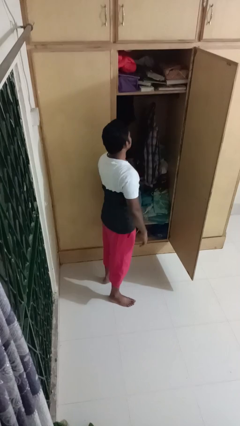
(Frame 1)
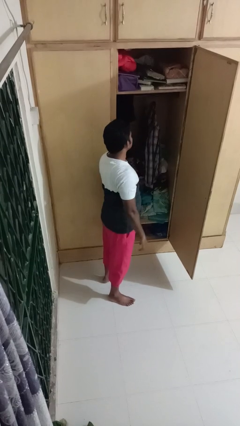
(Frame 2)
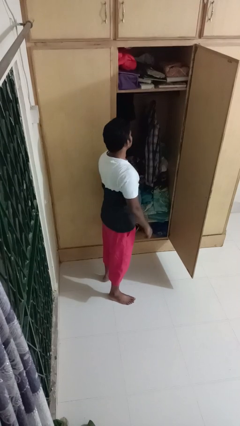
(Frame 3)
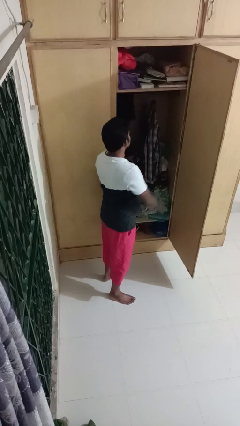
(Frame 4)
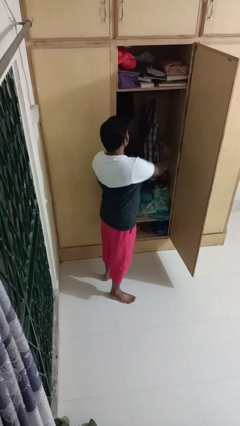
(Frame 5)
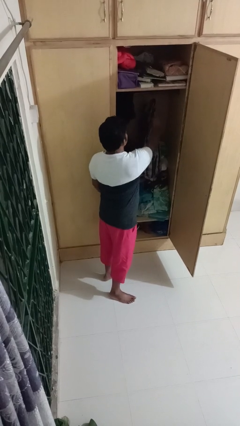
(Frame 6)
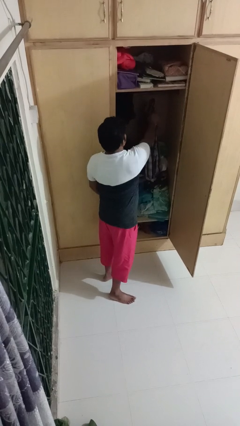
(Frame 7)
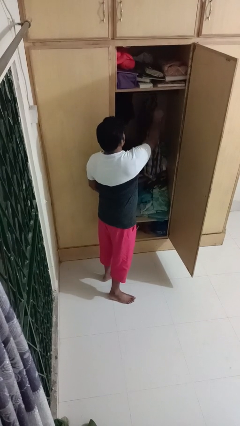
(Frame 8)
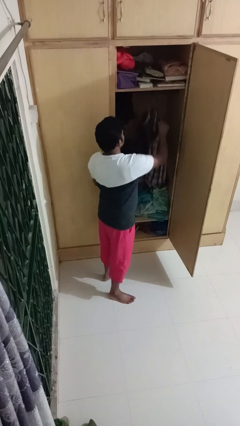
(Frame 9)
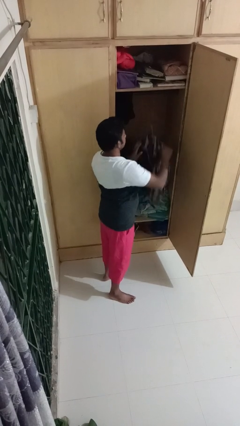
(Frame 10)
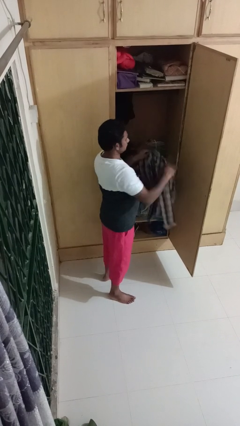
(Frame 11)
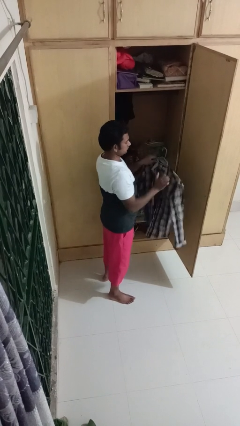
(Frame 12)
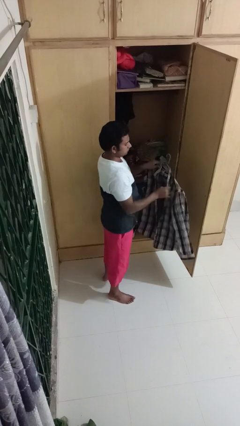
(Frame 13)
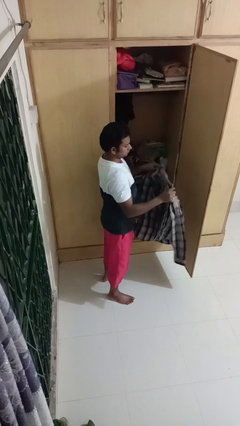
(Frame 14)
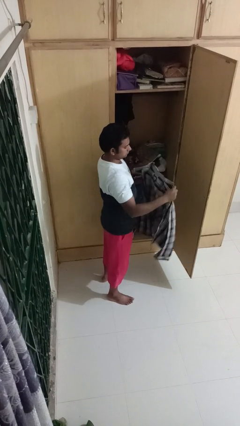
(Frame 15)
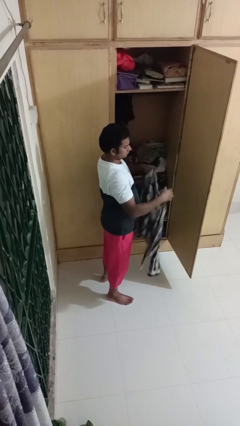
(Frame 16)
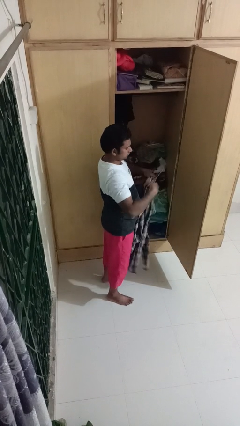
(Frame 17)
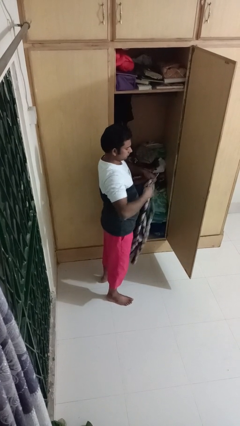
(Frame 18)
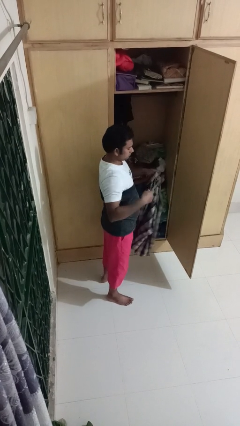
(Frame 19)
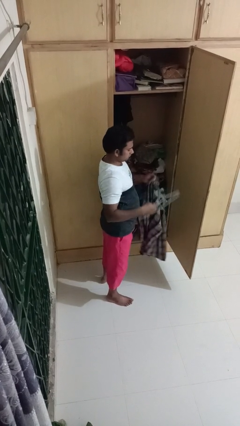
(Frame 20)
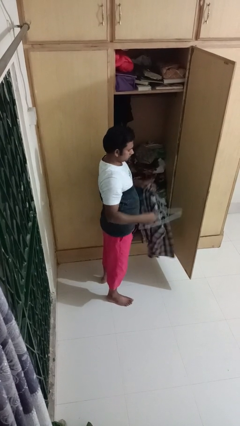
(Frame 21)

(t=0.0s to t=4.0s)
person takes clothes from closet

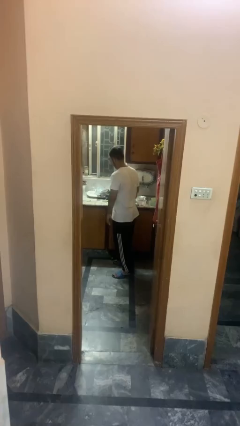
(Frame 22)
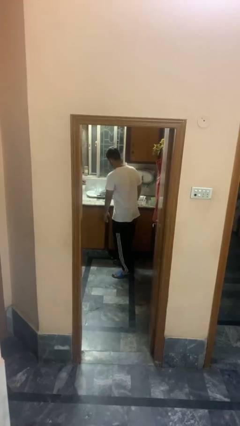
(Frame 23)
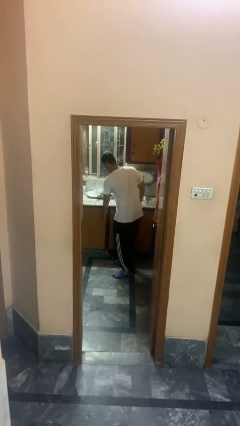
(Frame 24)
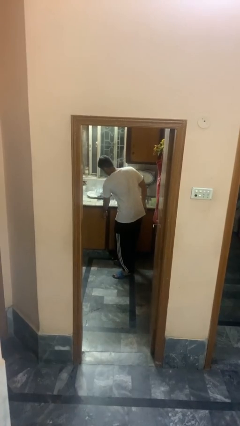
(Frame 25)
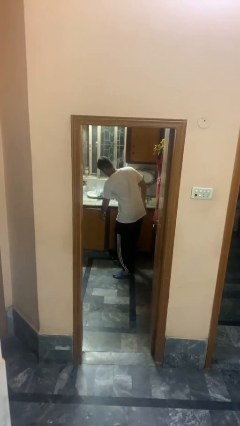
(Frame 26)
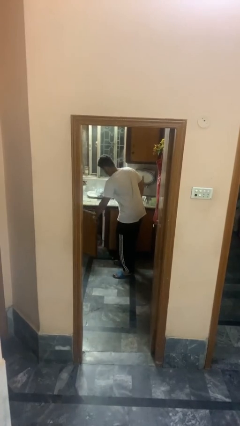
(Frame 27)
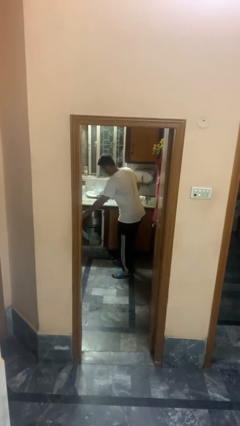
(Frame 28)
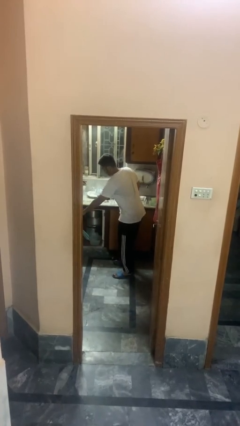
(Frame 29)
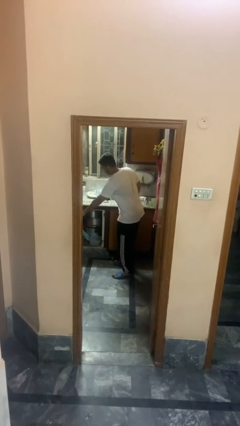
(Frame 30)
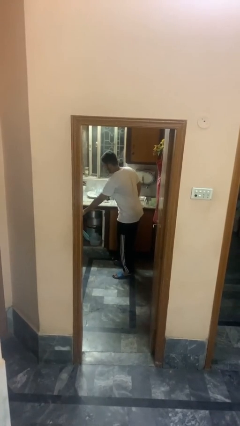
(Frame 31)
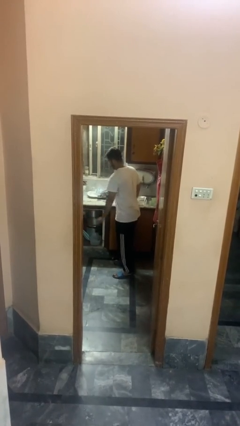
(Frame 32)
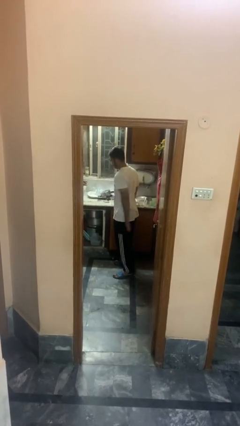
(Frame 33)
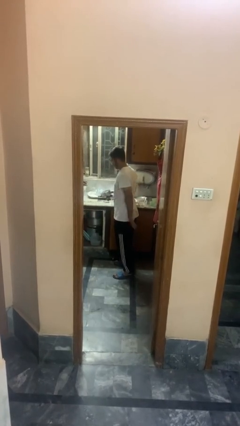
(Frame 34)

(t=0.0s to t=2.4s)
person opens cabinet

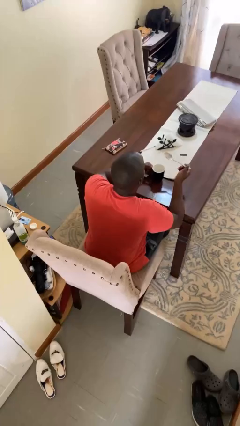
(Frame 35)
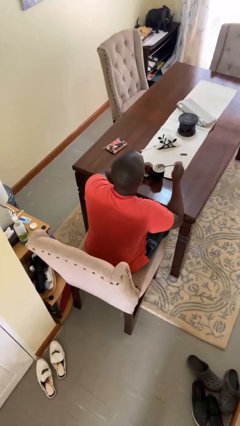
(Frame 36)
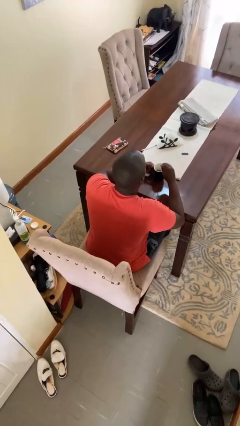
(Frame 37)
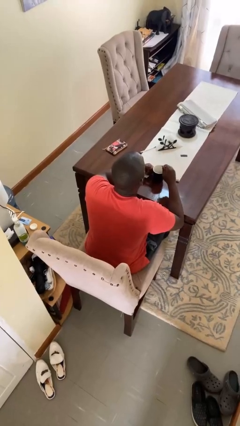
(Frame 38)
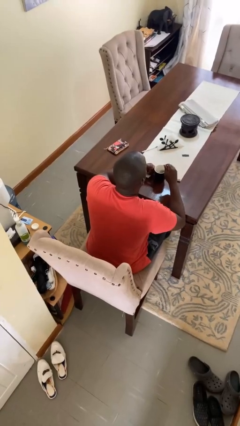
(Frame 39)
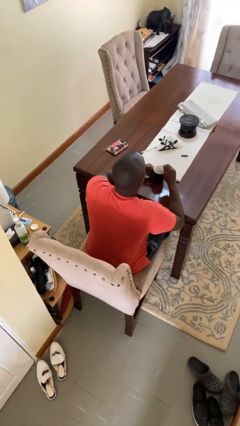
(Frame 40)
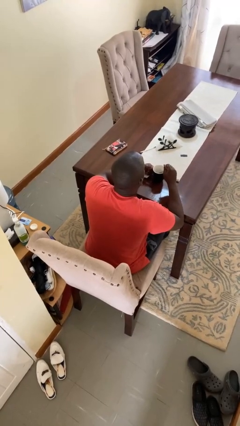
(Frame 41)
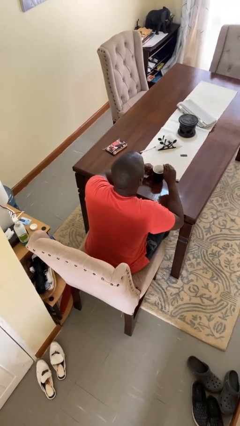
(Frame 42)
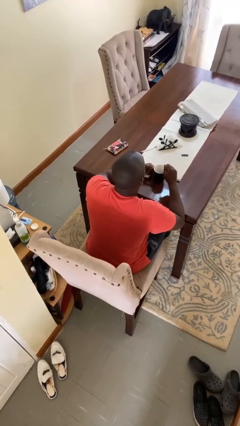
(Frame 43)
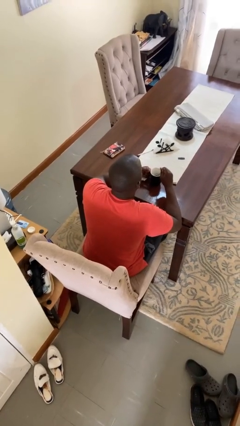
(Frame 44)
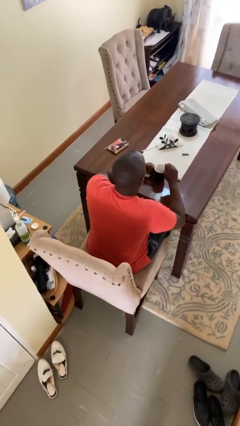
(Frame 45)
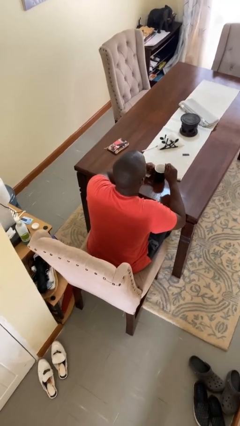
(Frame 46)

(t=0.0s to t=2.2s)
person stirs mug

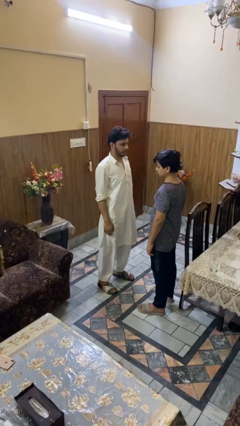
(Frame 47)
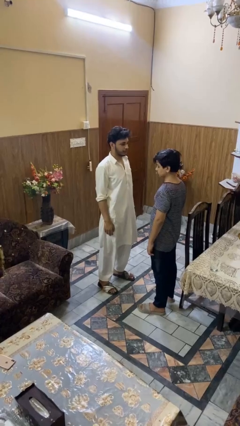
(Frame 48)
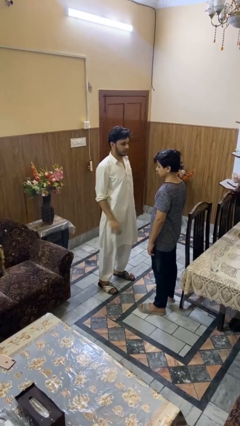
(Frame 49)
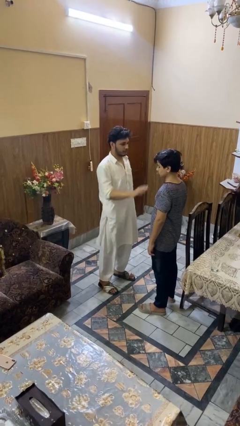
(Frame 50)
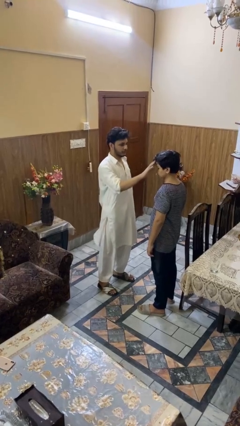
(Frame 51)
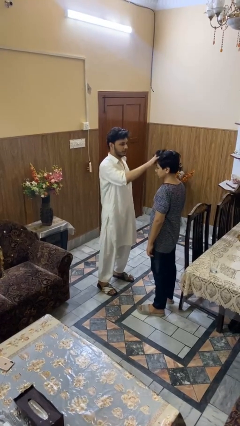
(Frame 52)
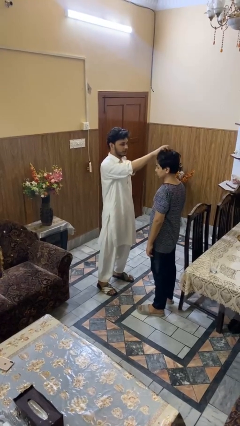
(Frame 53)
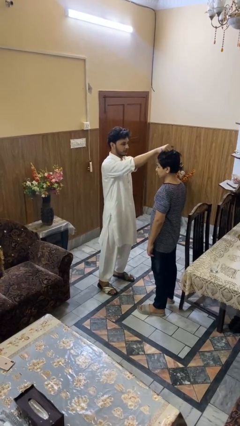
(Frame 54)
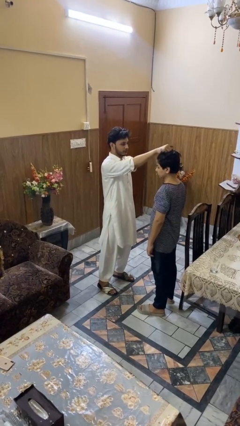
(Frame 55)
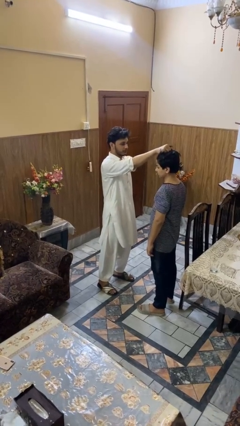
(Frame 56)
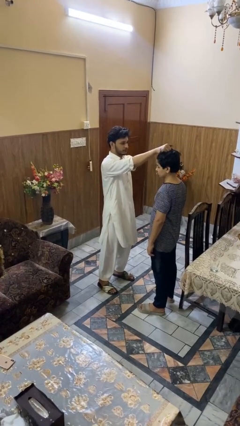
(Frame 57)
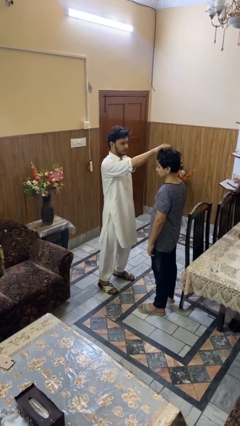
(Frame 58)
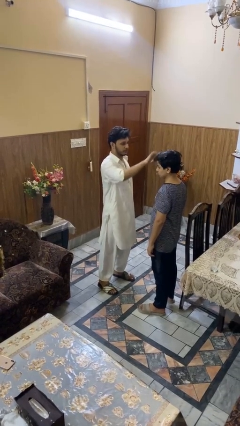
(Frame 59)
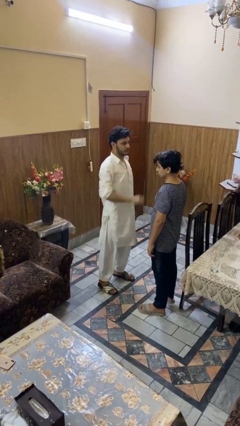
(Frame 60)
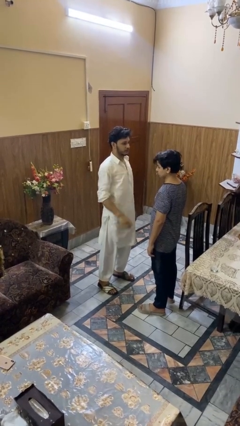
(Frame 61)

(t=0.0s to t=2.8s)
person grabs person by hair

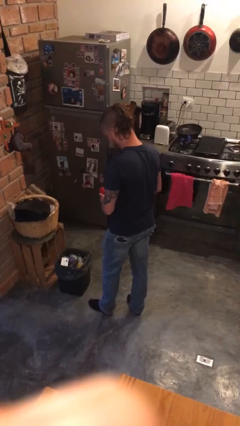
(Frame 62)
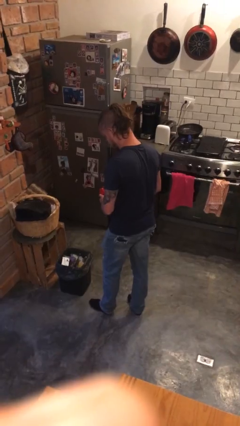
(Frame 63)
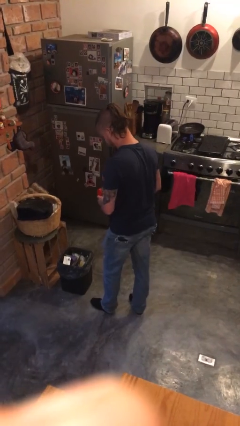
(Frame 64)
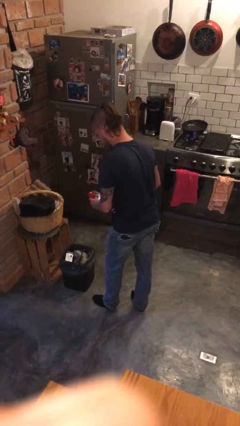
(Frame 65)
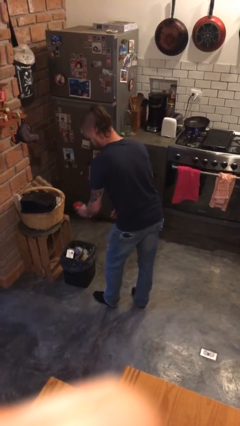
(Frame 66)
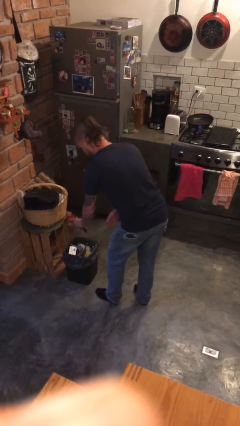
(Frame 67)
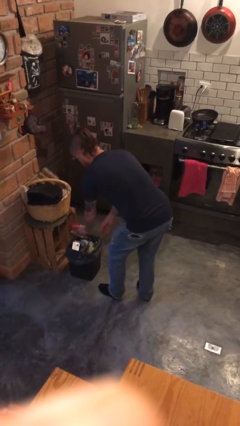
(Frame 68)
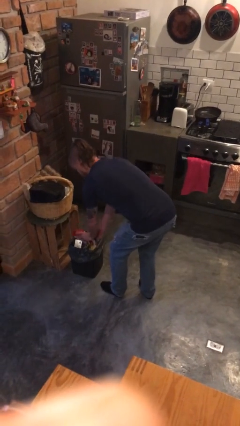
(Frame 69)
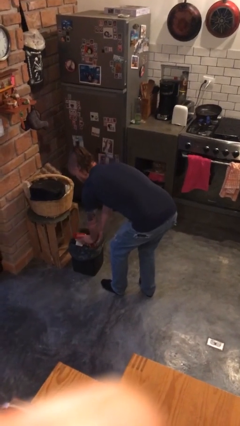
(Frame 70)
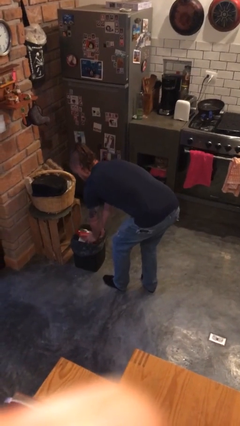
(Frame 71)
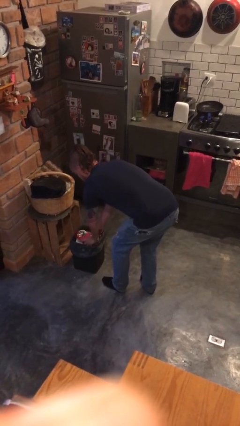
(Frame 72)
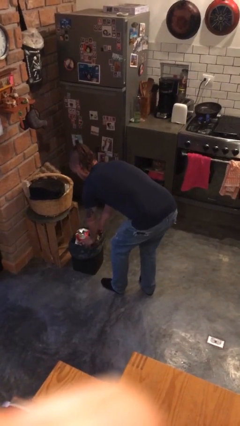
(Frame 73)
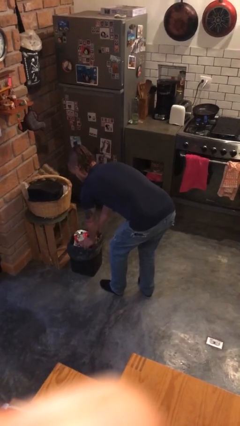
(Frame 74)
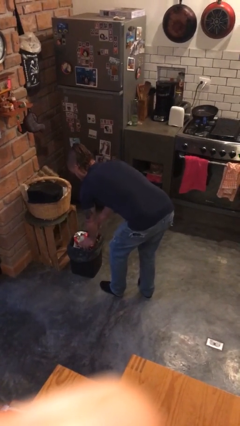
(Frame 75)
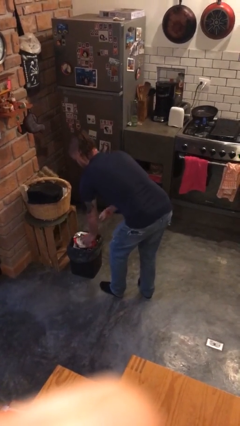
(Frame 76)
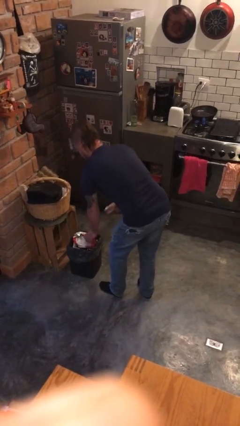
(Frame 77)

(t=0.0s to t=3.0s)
person discards trash

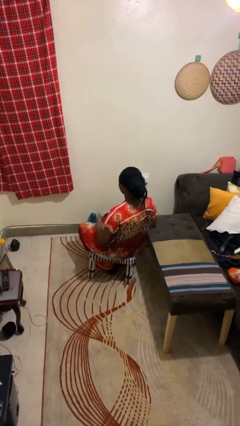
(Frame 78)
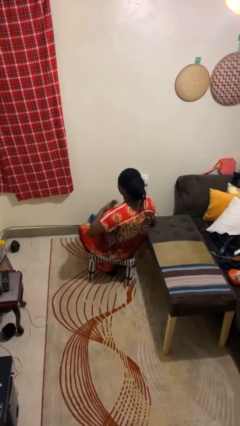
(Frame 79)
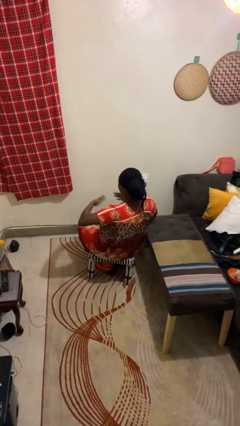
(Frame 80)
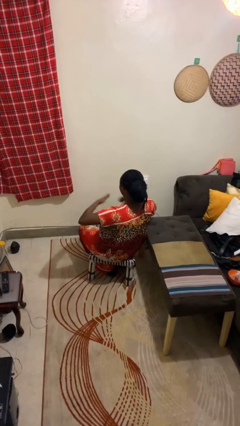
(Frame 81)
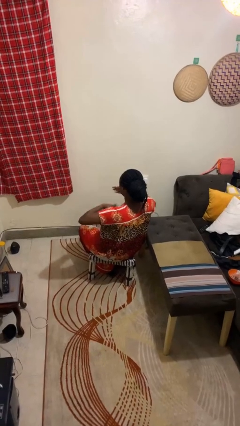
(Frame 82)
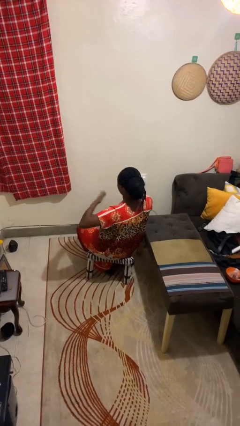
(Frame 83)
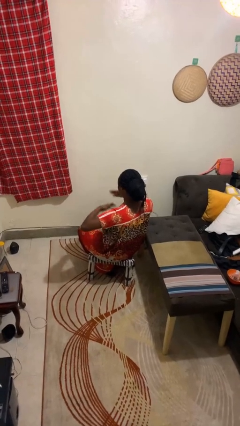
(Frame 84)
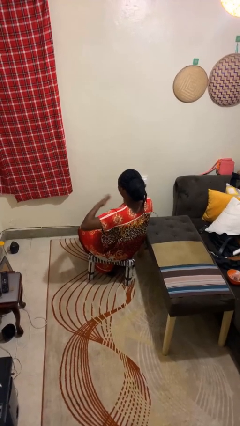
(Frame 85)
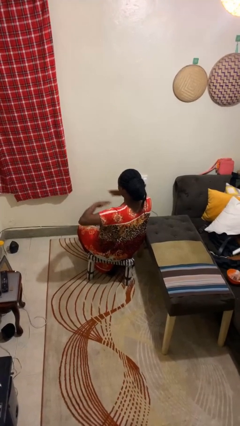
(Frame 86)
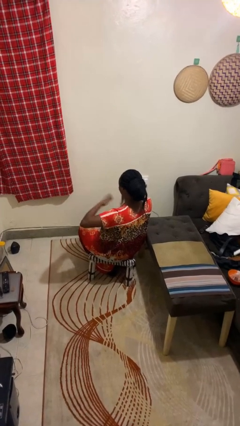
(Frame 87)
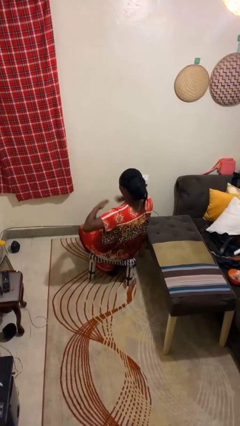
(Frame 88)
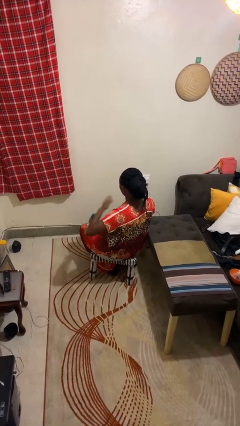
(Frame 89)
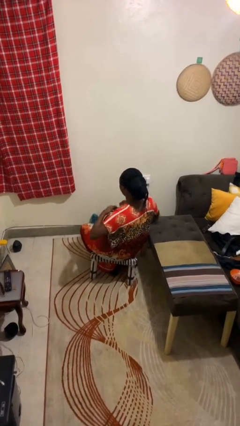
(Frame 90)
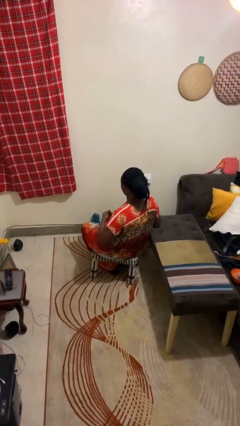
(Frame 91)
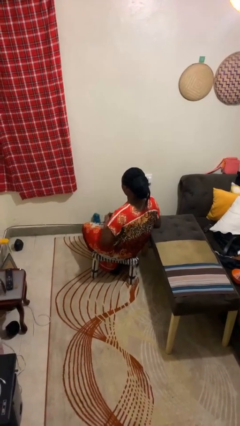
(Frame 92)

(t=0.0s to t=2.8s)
person drums on chest

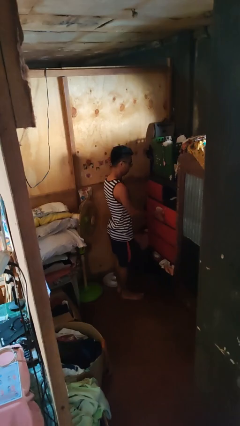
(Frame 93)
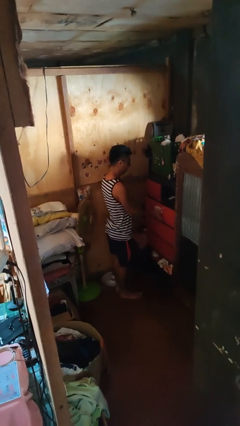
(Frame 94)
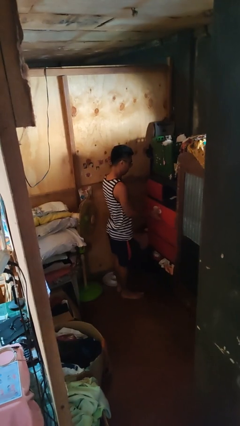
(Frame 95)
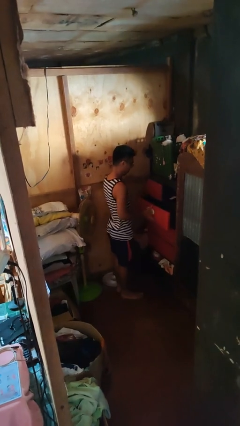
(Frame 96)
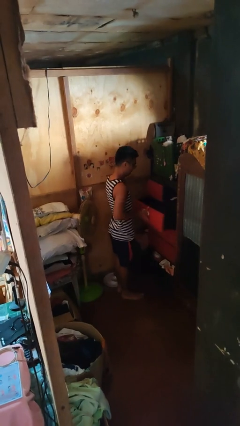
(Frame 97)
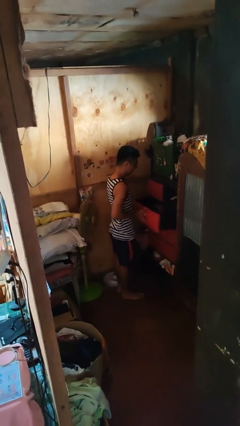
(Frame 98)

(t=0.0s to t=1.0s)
person opens dresser drawer